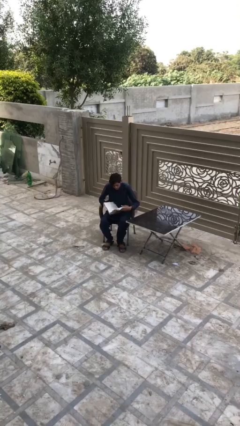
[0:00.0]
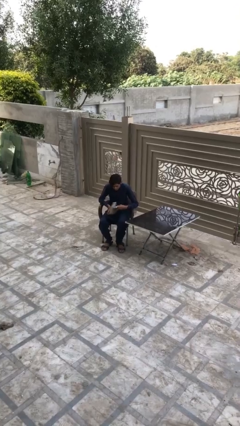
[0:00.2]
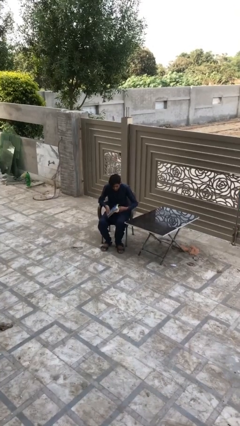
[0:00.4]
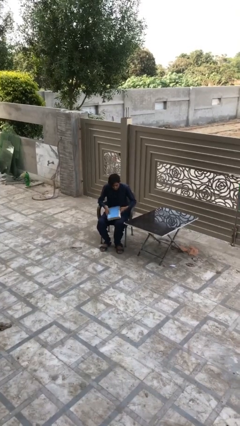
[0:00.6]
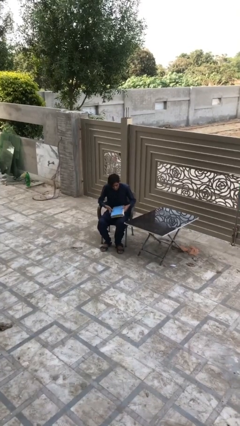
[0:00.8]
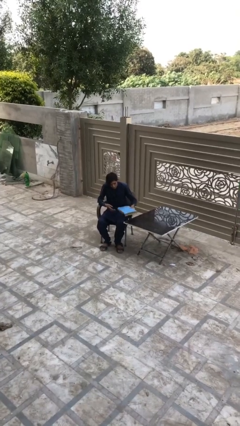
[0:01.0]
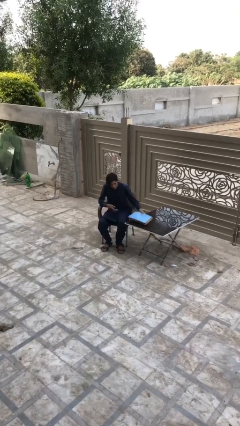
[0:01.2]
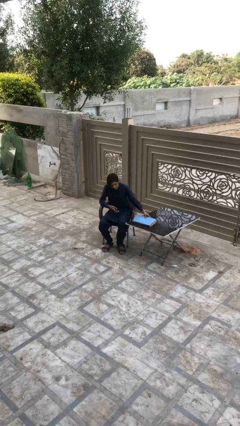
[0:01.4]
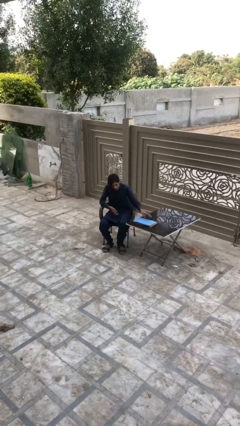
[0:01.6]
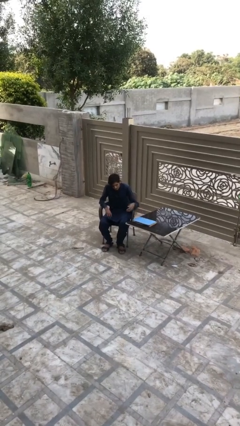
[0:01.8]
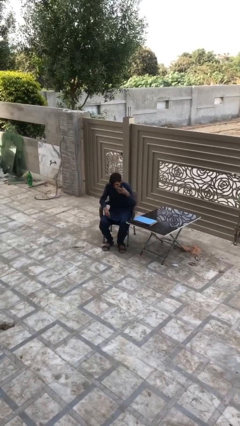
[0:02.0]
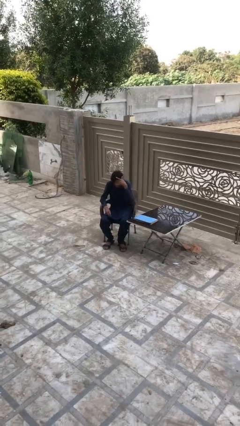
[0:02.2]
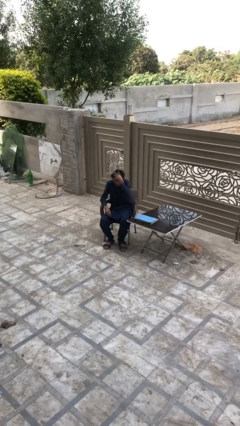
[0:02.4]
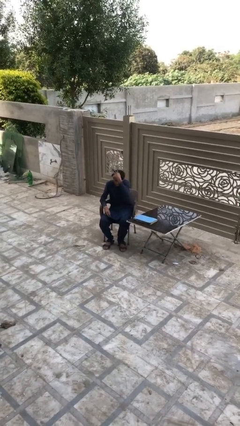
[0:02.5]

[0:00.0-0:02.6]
person puts down object on table

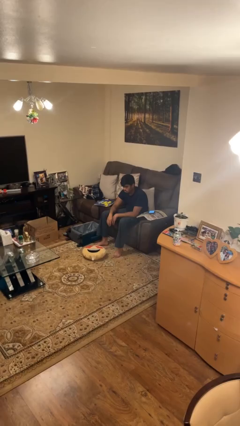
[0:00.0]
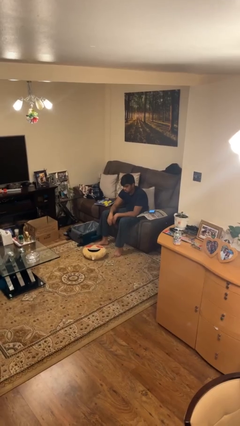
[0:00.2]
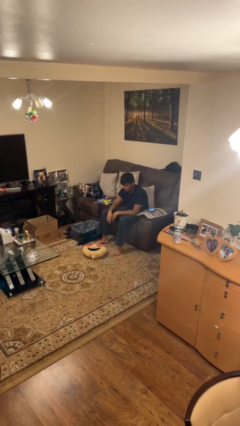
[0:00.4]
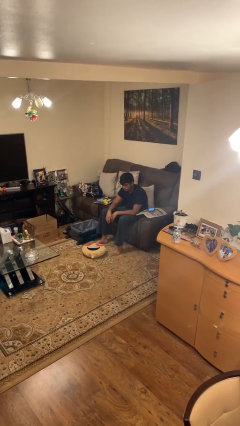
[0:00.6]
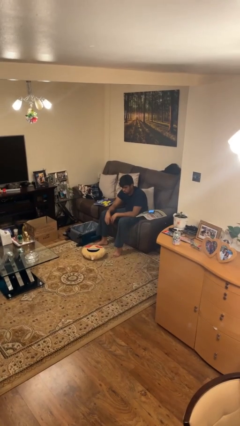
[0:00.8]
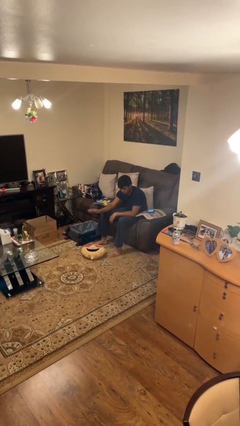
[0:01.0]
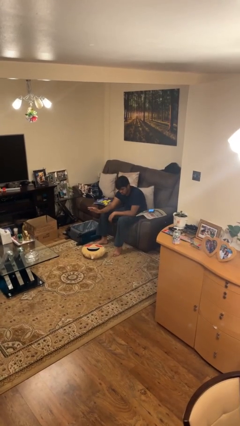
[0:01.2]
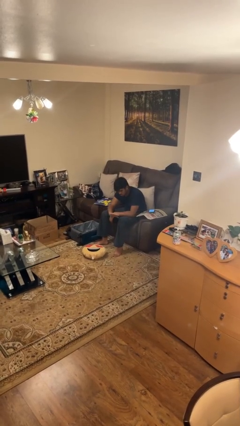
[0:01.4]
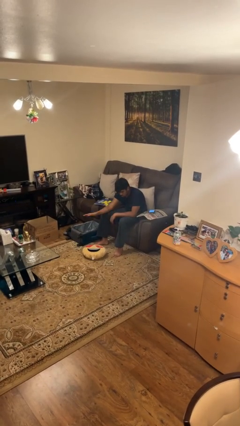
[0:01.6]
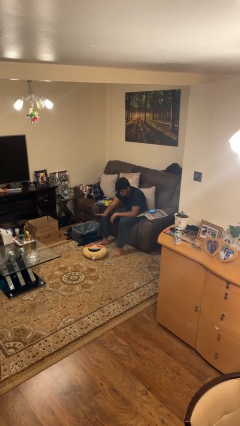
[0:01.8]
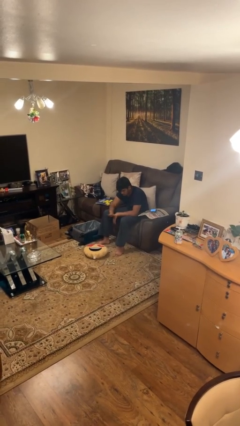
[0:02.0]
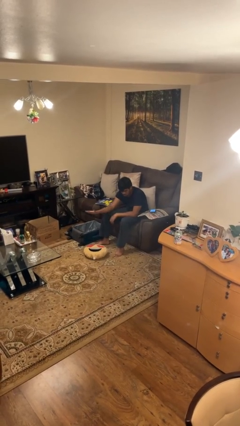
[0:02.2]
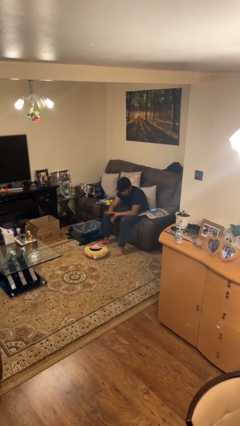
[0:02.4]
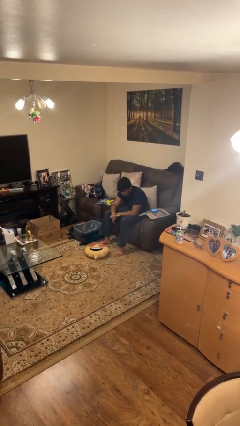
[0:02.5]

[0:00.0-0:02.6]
person waves hand over object

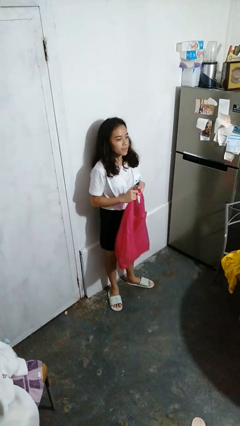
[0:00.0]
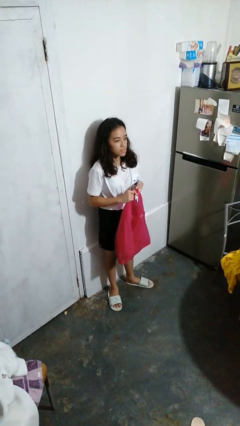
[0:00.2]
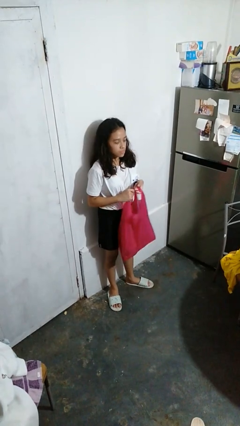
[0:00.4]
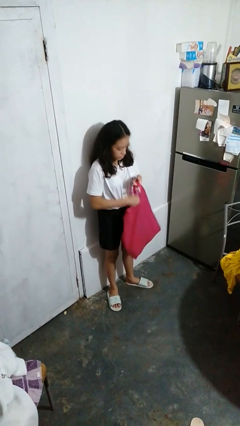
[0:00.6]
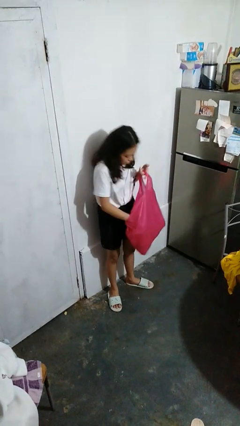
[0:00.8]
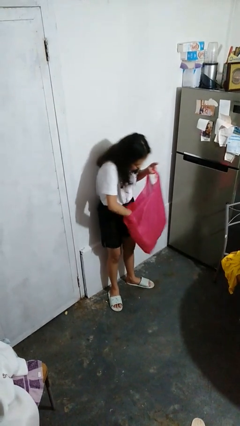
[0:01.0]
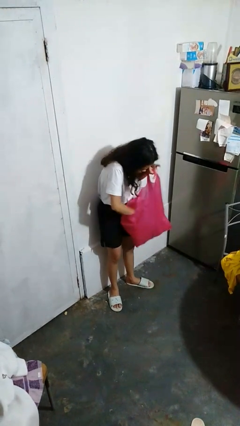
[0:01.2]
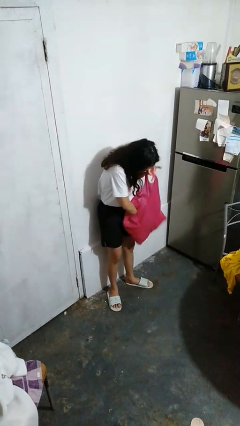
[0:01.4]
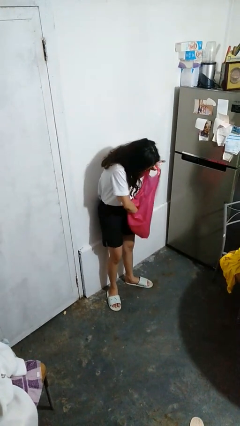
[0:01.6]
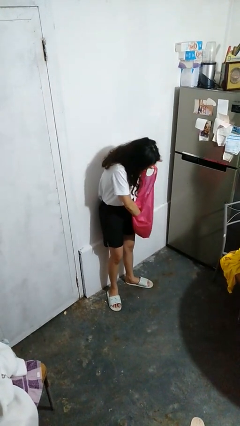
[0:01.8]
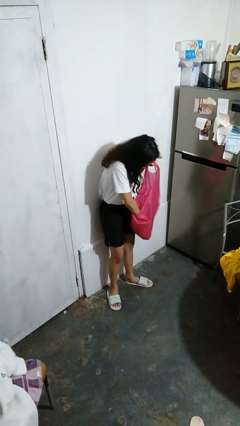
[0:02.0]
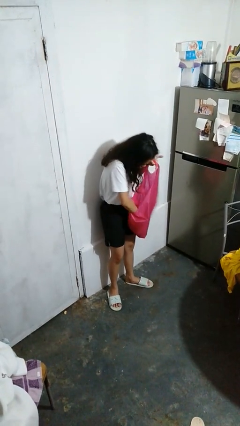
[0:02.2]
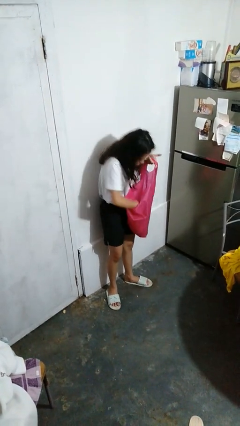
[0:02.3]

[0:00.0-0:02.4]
person searches in bag

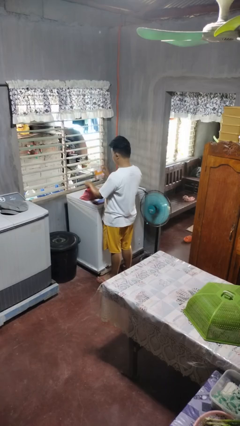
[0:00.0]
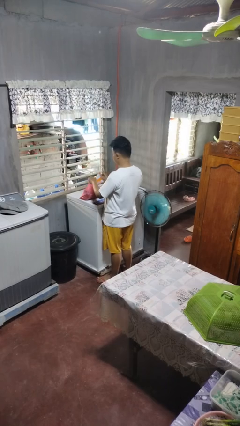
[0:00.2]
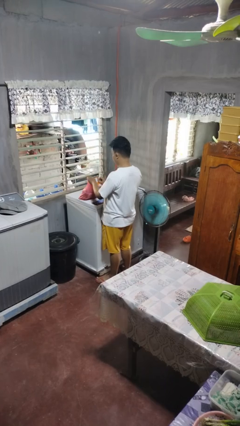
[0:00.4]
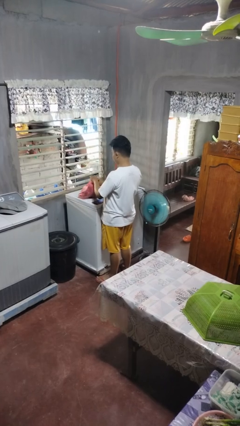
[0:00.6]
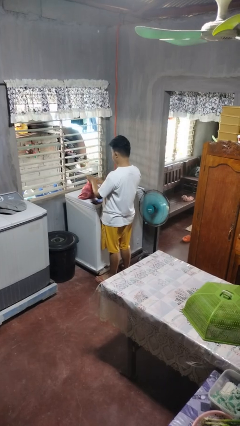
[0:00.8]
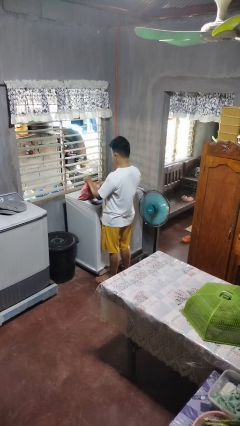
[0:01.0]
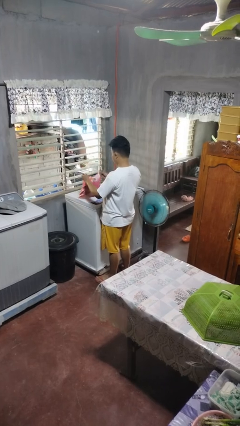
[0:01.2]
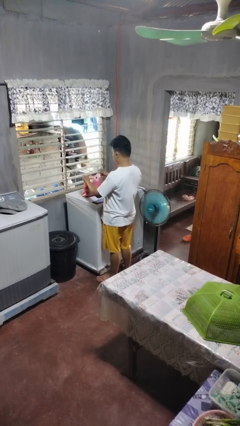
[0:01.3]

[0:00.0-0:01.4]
person puts object into bag

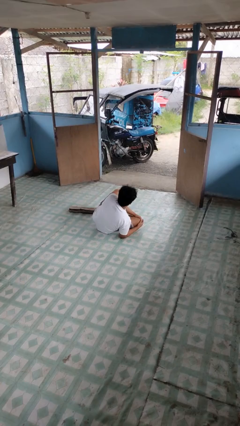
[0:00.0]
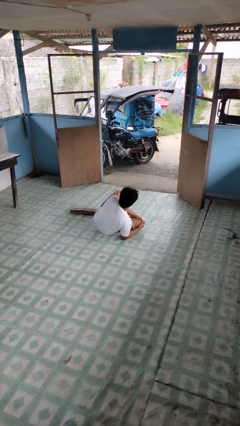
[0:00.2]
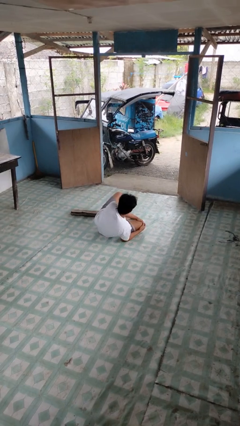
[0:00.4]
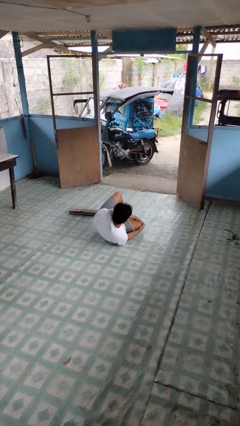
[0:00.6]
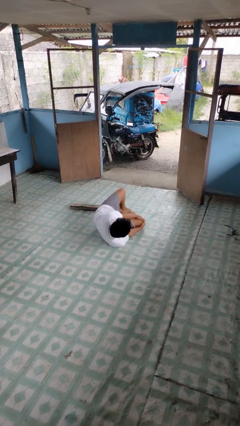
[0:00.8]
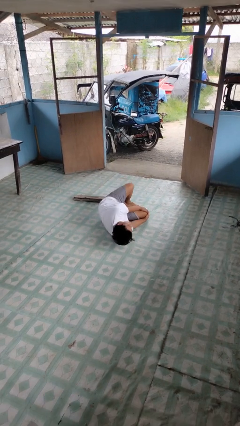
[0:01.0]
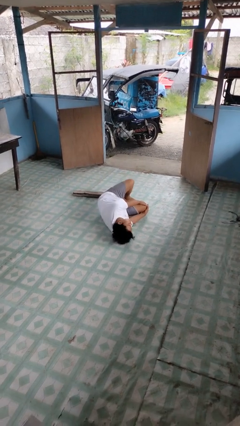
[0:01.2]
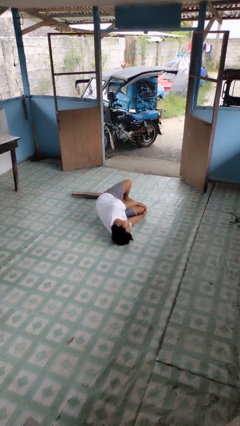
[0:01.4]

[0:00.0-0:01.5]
person lies down on floor

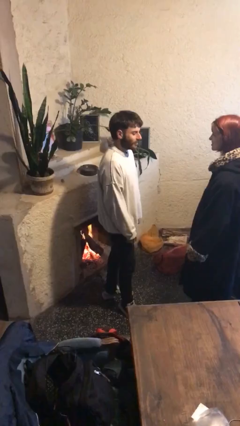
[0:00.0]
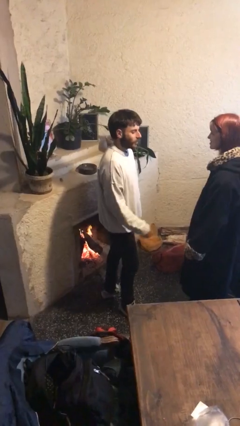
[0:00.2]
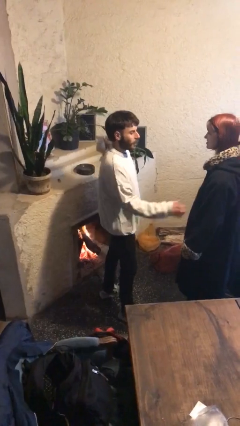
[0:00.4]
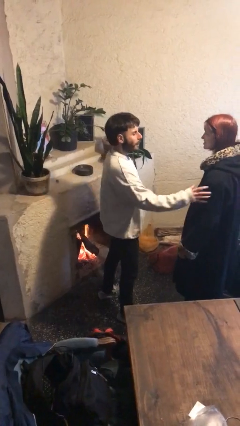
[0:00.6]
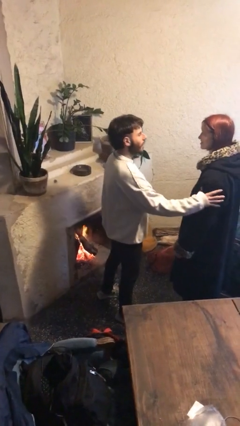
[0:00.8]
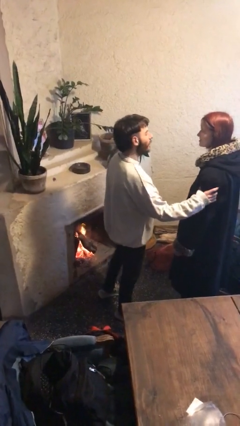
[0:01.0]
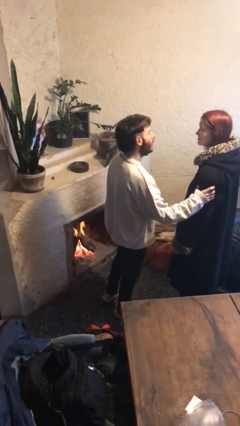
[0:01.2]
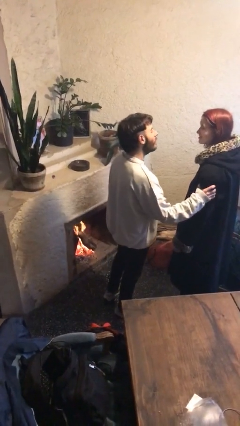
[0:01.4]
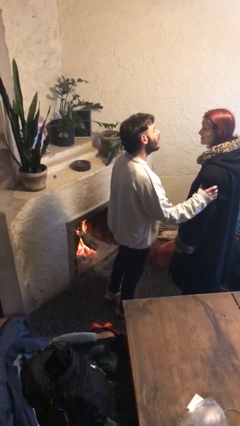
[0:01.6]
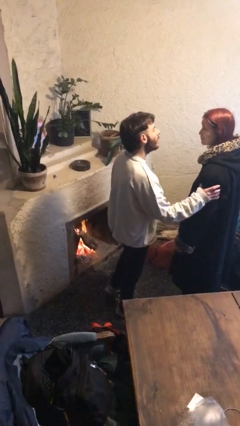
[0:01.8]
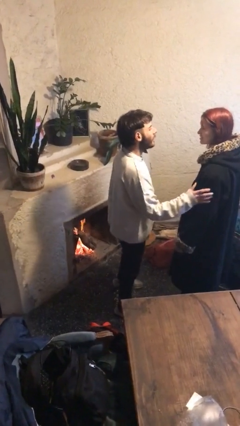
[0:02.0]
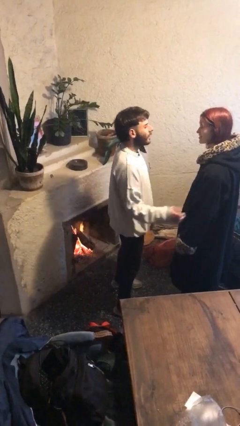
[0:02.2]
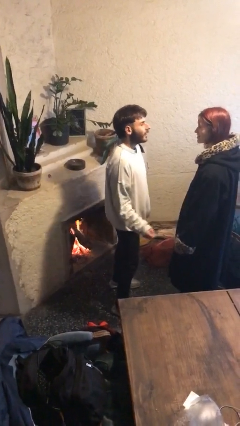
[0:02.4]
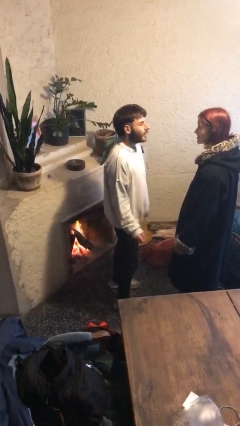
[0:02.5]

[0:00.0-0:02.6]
person grabs person by bicep

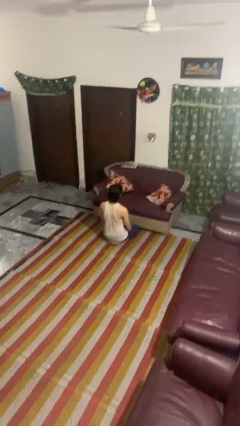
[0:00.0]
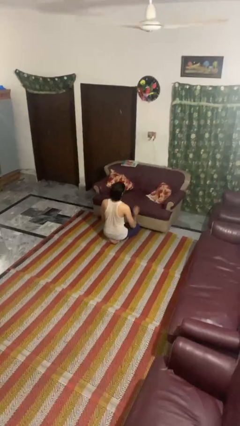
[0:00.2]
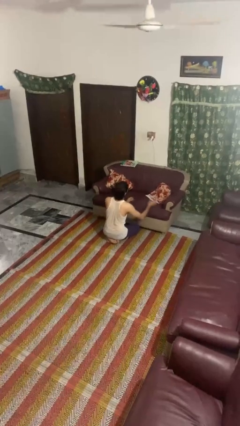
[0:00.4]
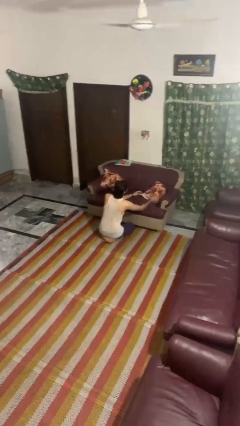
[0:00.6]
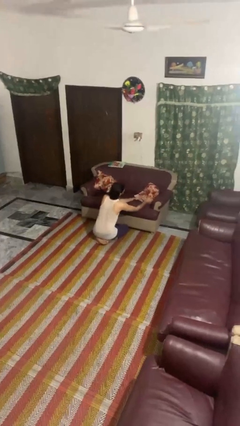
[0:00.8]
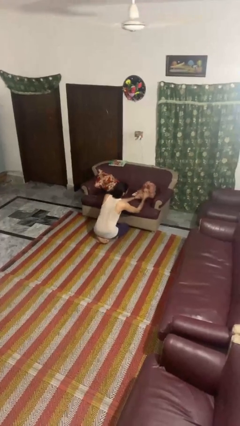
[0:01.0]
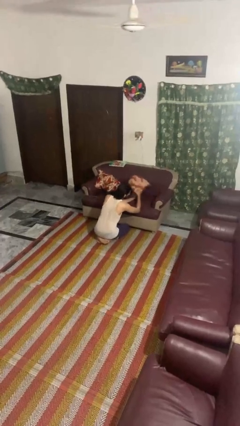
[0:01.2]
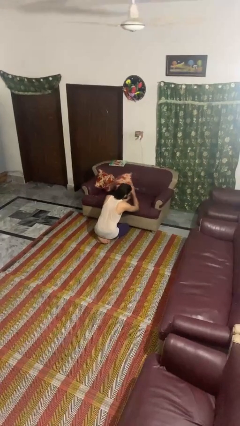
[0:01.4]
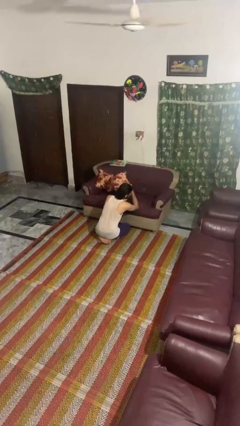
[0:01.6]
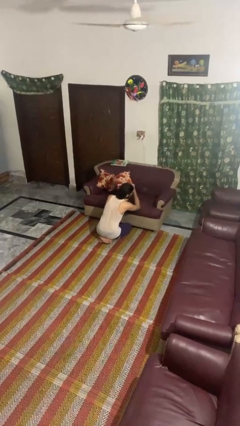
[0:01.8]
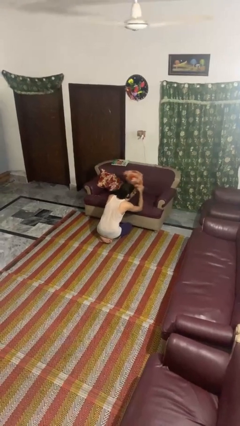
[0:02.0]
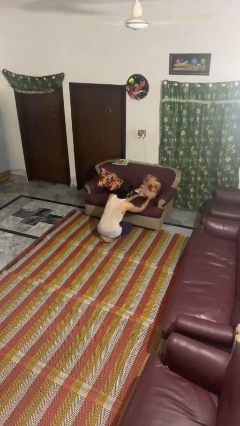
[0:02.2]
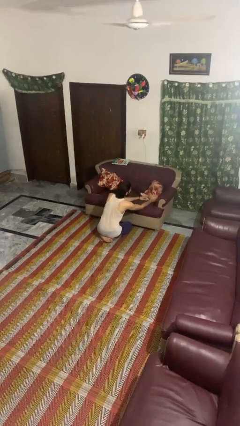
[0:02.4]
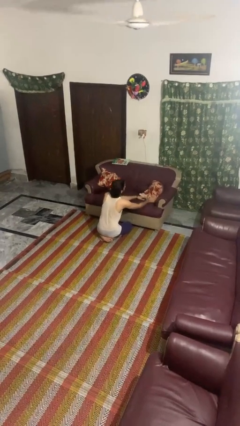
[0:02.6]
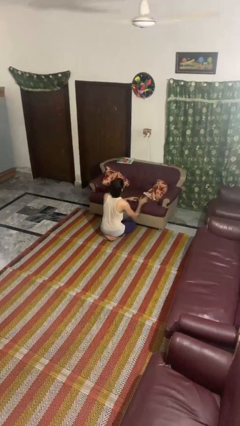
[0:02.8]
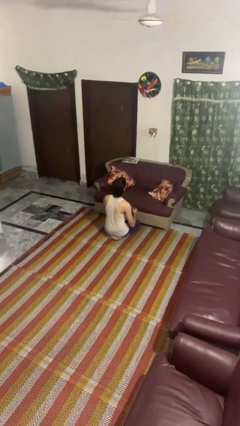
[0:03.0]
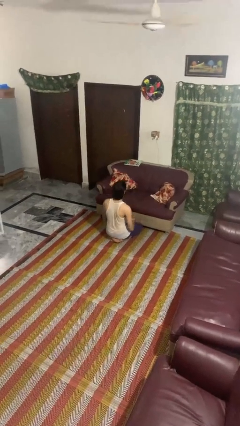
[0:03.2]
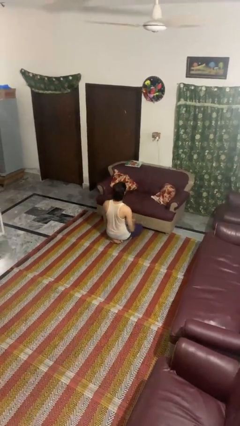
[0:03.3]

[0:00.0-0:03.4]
person searches in couch

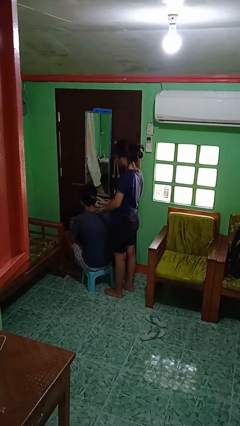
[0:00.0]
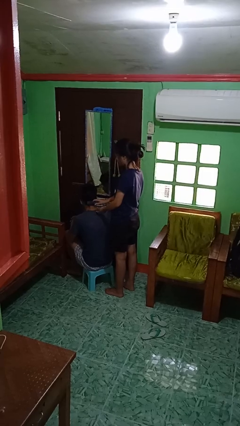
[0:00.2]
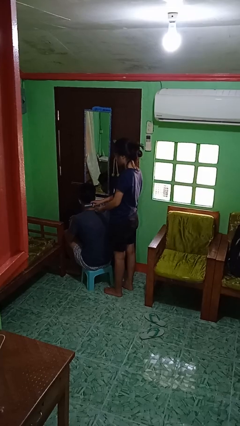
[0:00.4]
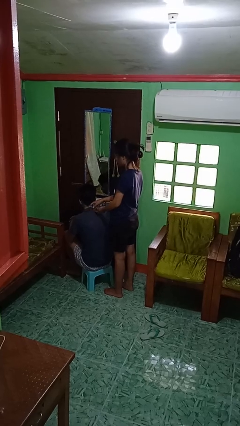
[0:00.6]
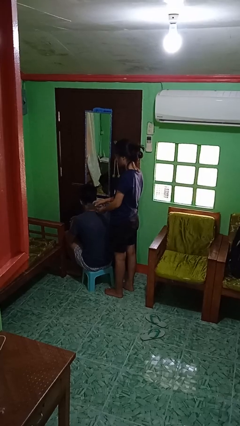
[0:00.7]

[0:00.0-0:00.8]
person brushes hair of person
